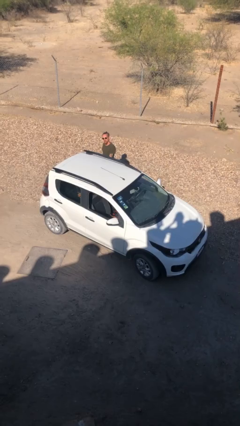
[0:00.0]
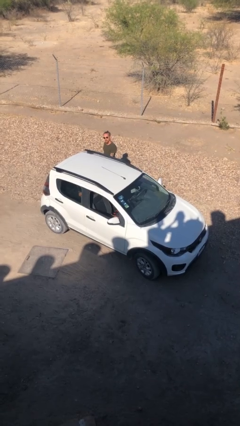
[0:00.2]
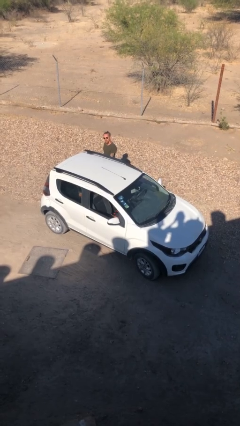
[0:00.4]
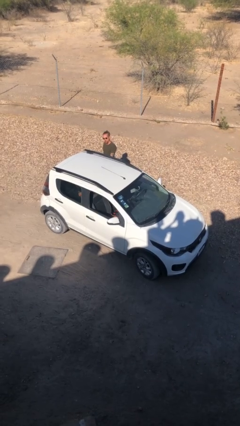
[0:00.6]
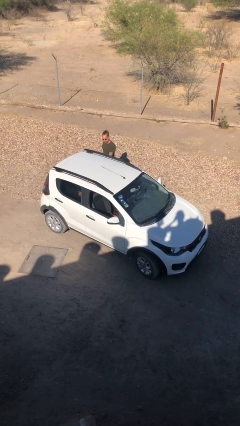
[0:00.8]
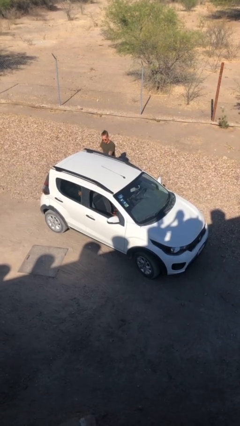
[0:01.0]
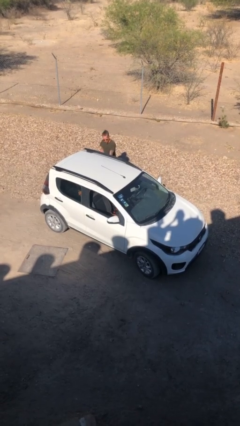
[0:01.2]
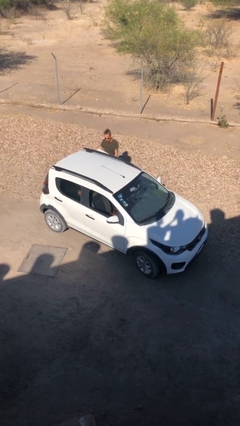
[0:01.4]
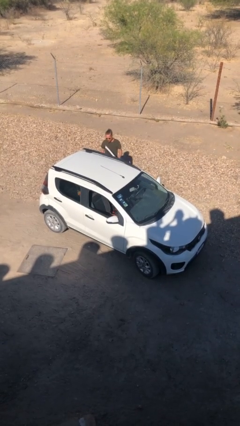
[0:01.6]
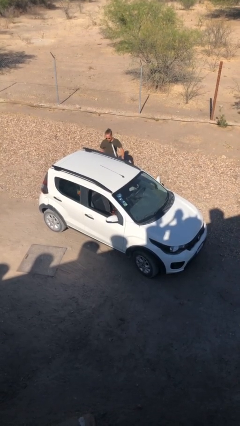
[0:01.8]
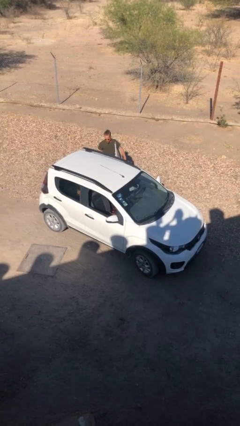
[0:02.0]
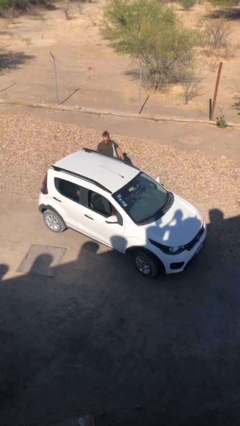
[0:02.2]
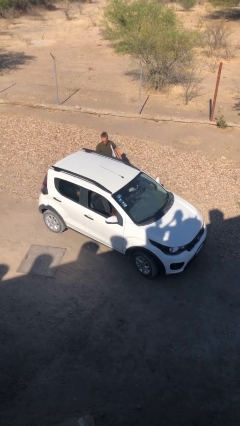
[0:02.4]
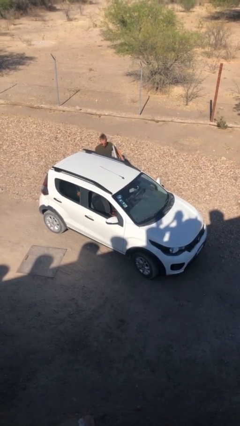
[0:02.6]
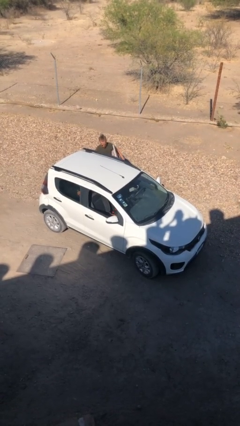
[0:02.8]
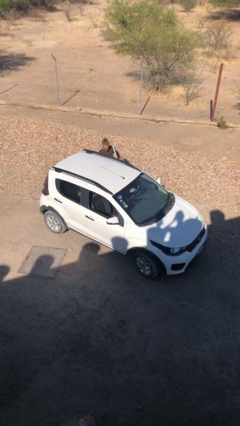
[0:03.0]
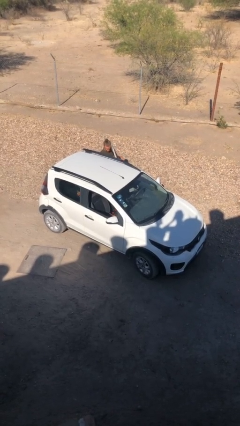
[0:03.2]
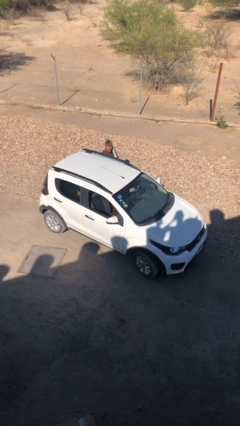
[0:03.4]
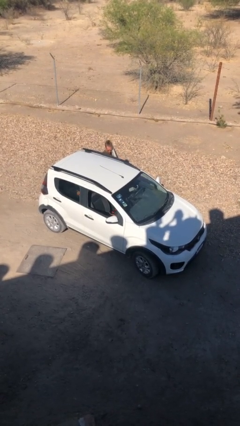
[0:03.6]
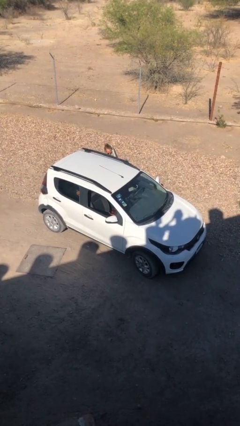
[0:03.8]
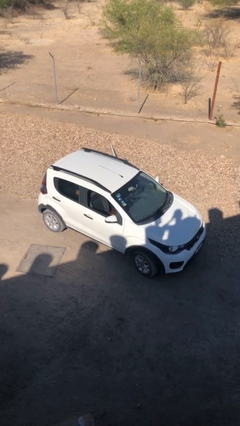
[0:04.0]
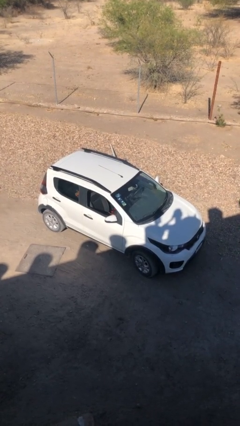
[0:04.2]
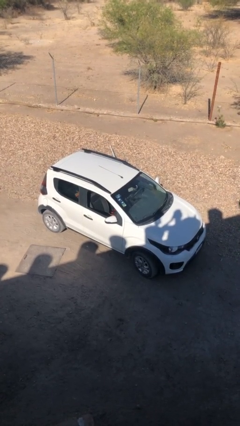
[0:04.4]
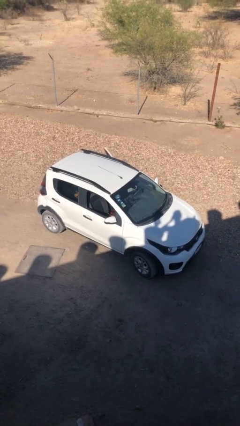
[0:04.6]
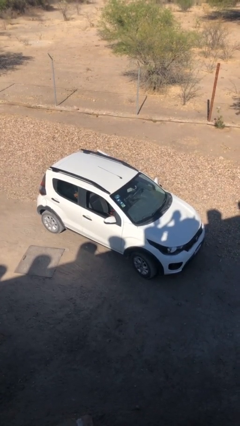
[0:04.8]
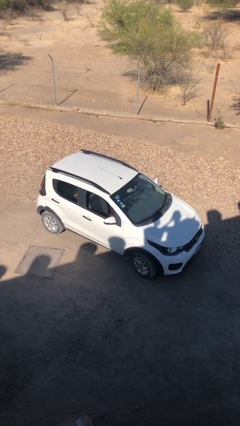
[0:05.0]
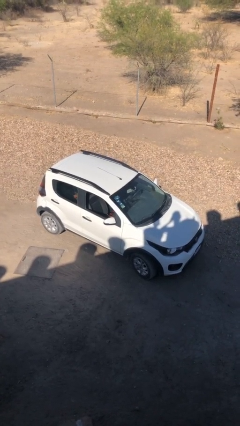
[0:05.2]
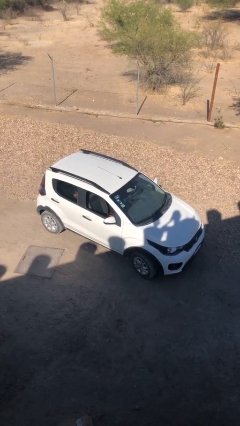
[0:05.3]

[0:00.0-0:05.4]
car picks up person

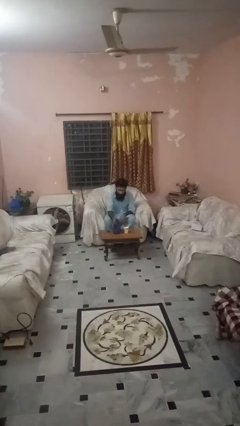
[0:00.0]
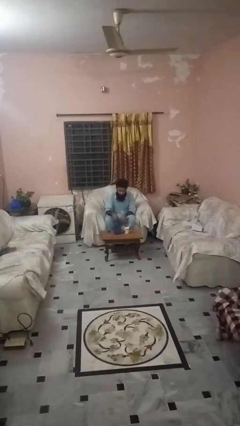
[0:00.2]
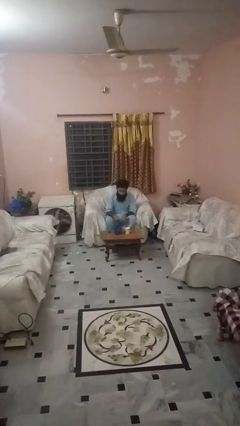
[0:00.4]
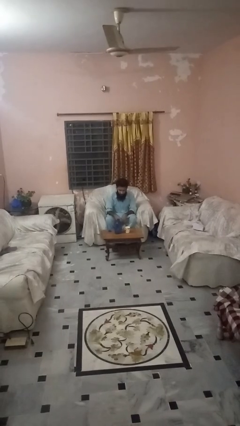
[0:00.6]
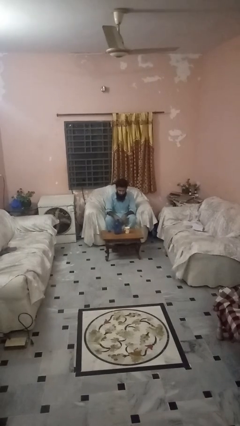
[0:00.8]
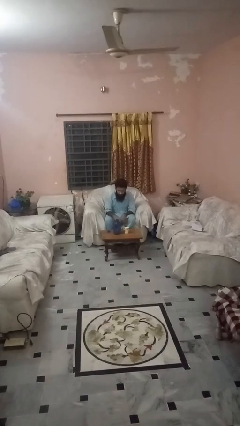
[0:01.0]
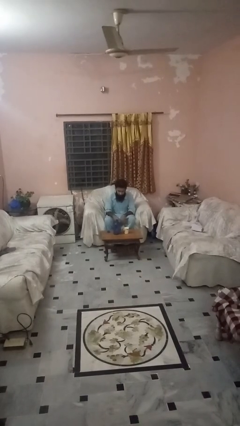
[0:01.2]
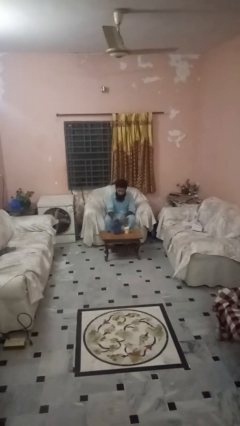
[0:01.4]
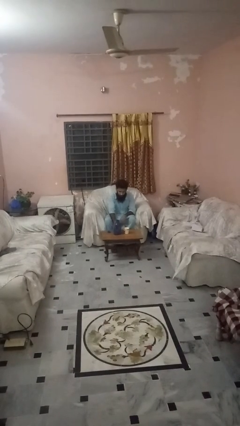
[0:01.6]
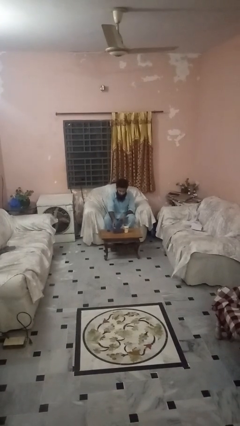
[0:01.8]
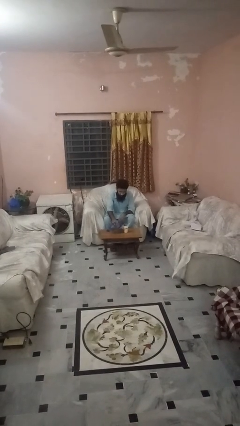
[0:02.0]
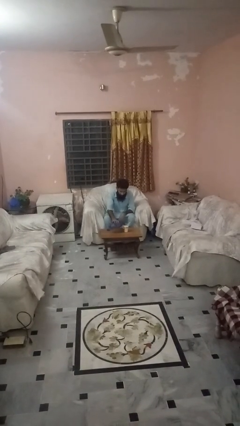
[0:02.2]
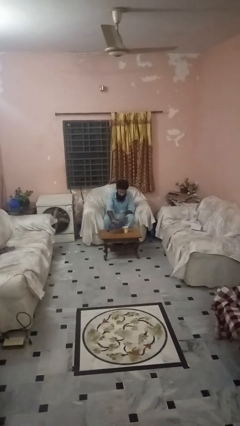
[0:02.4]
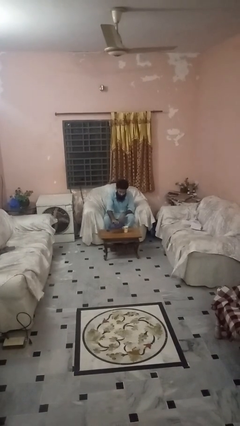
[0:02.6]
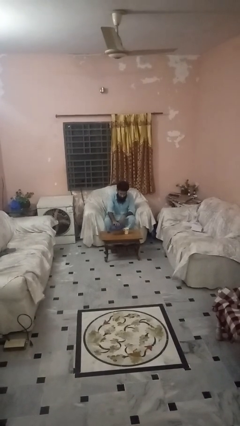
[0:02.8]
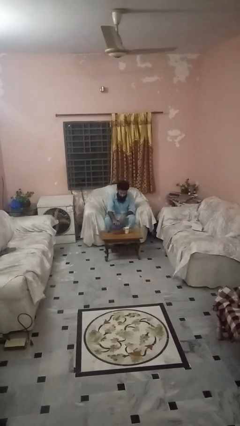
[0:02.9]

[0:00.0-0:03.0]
person pours liquid into cup

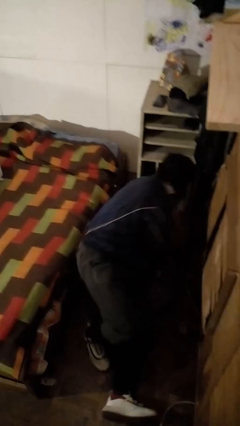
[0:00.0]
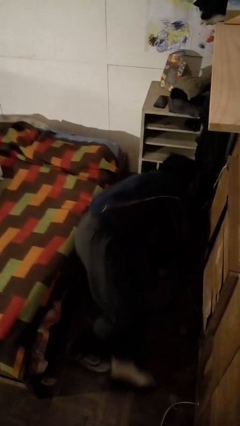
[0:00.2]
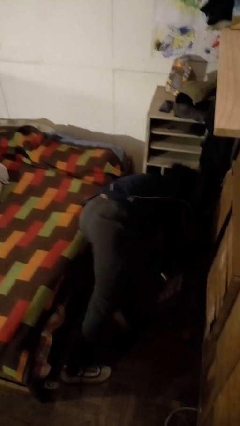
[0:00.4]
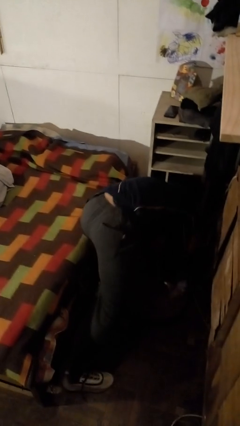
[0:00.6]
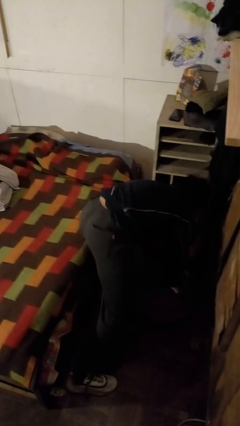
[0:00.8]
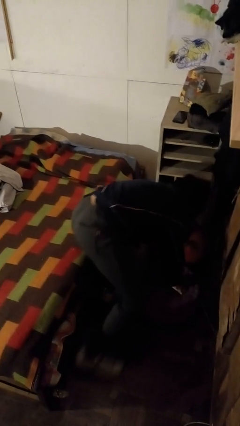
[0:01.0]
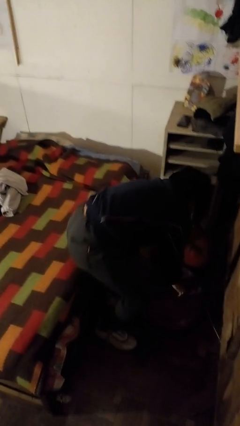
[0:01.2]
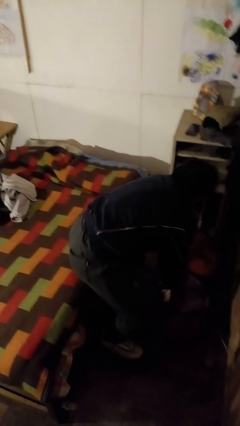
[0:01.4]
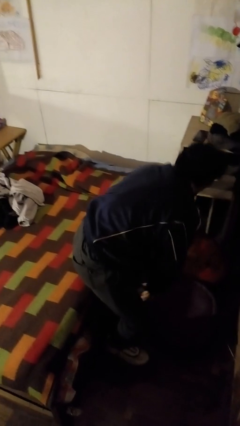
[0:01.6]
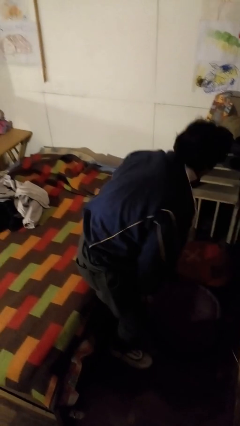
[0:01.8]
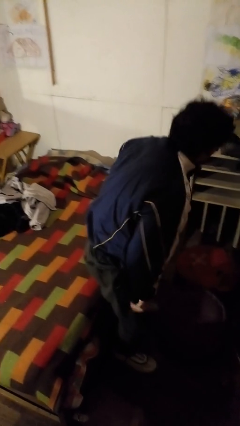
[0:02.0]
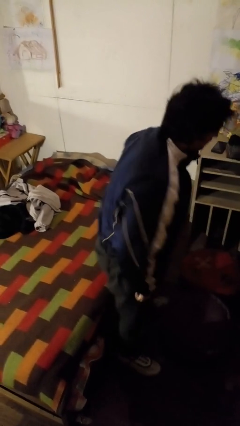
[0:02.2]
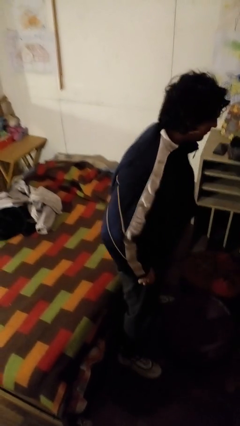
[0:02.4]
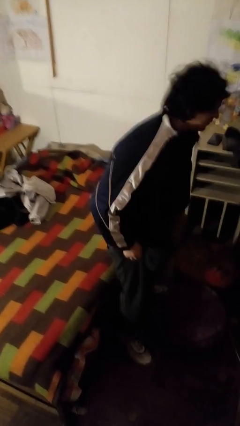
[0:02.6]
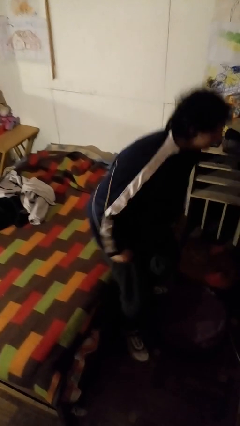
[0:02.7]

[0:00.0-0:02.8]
person stands up from floor

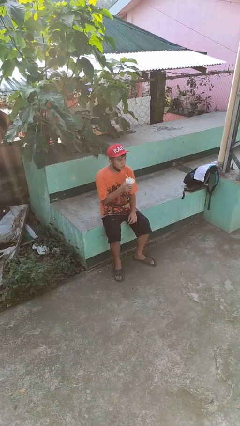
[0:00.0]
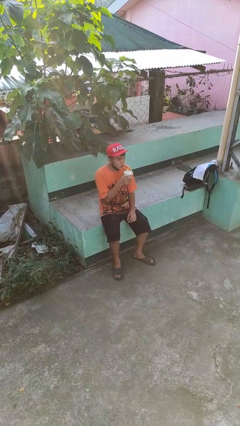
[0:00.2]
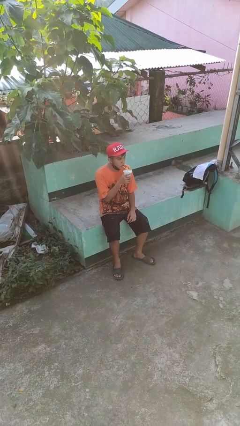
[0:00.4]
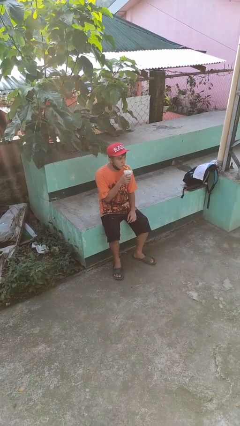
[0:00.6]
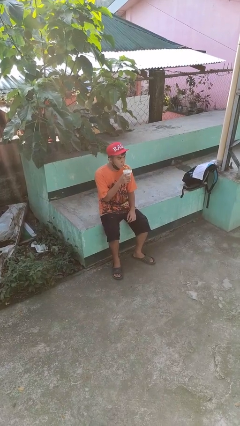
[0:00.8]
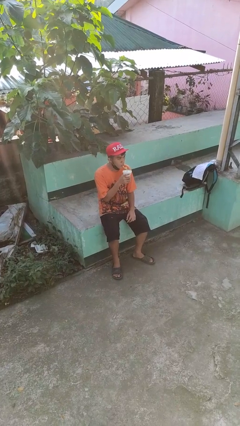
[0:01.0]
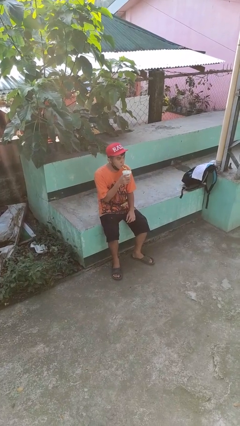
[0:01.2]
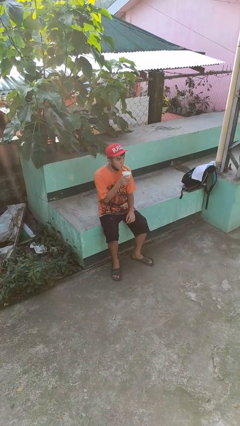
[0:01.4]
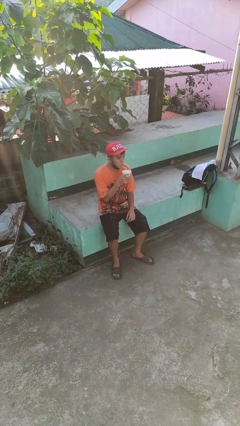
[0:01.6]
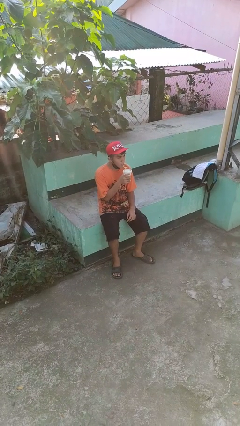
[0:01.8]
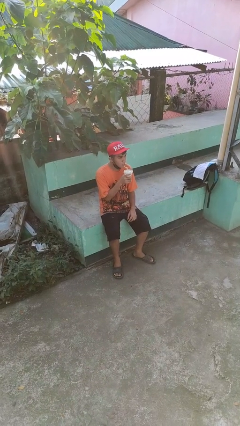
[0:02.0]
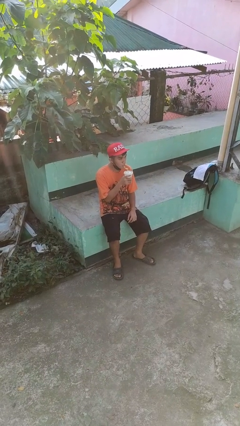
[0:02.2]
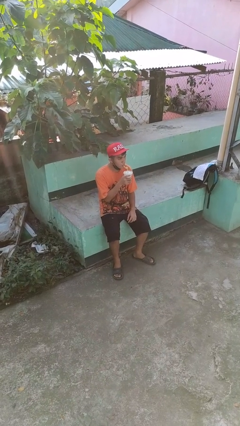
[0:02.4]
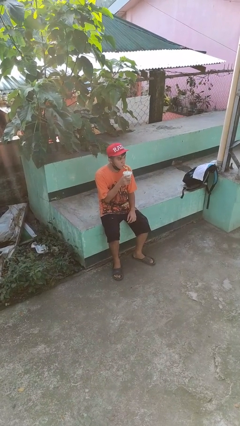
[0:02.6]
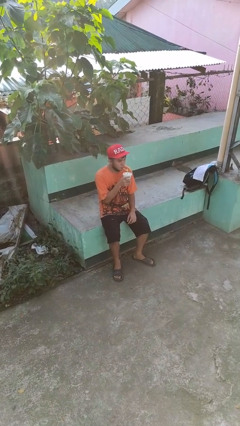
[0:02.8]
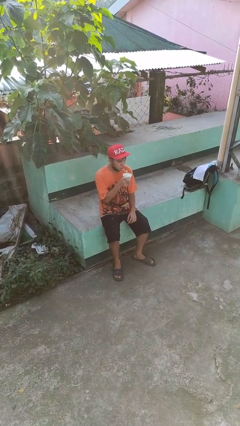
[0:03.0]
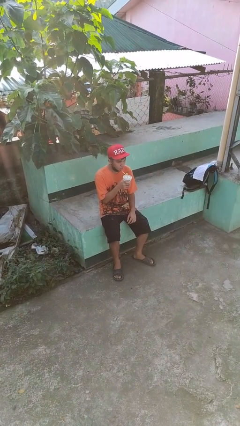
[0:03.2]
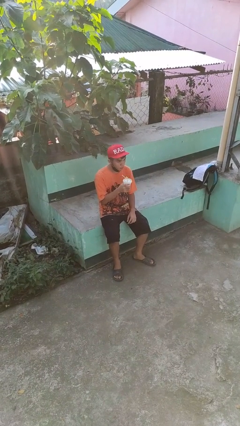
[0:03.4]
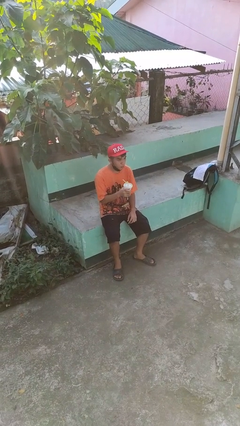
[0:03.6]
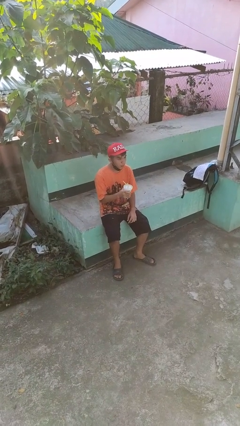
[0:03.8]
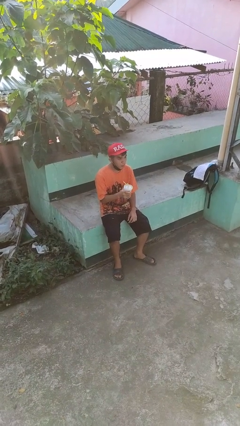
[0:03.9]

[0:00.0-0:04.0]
person drinks from straw

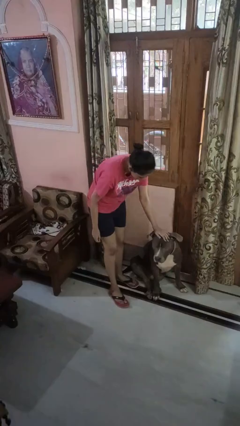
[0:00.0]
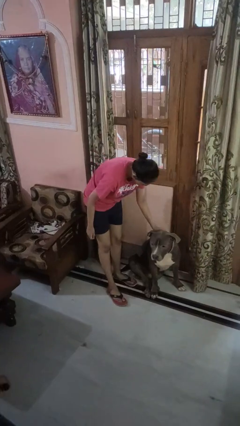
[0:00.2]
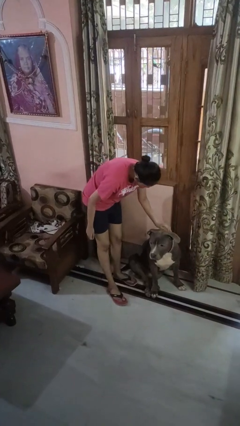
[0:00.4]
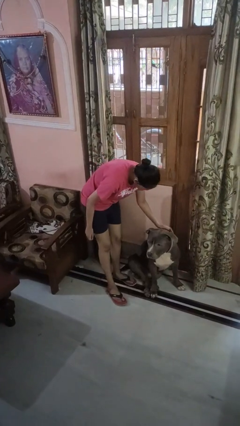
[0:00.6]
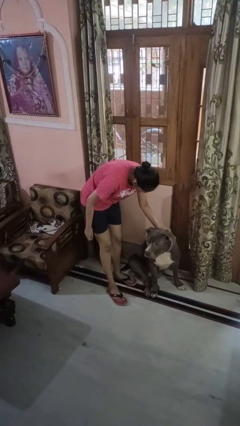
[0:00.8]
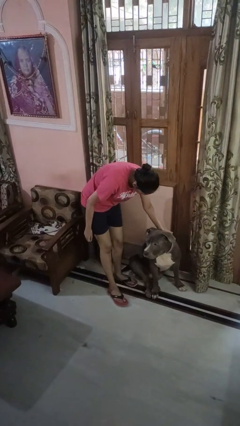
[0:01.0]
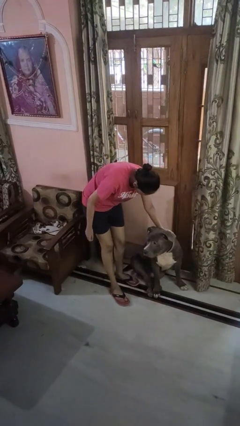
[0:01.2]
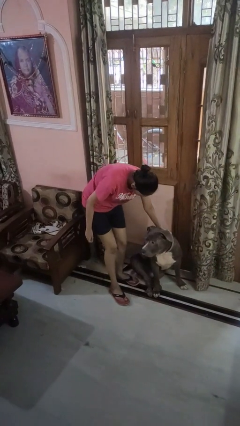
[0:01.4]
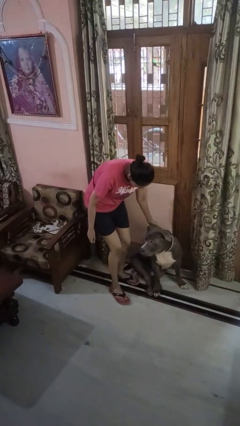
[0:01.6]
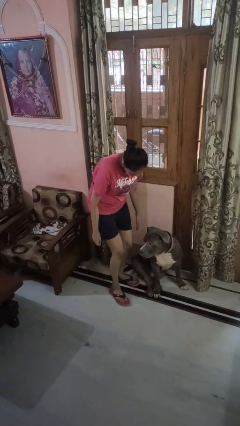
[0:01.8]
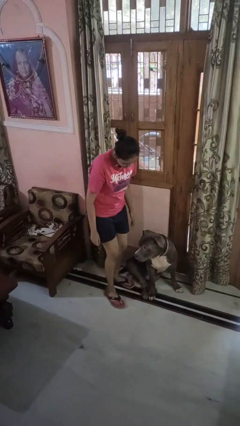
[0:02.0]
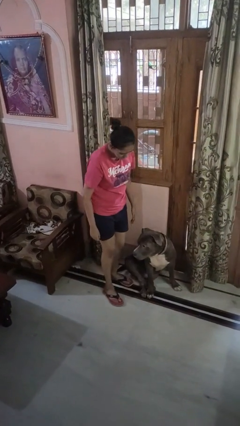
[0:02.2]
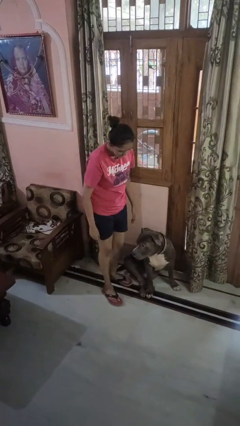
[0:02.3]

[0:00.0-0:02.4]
person pets dog
